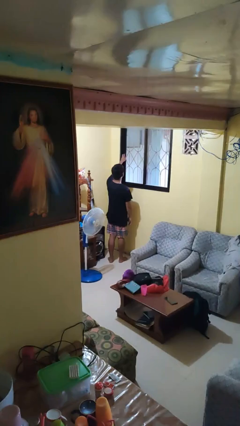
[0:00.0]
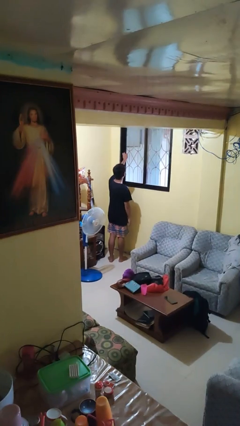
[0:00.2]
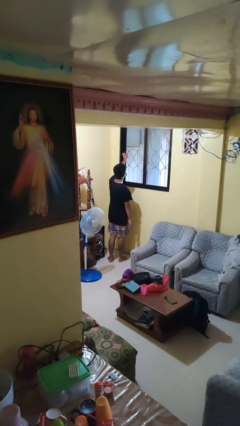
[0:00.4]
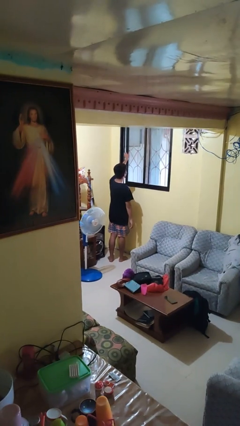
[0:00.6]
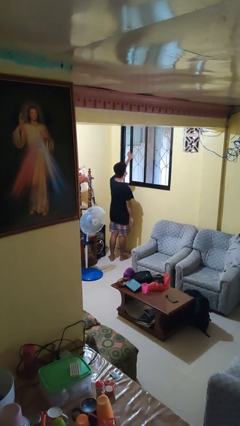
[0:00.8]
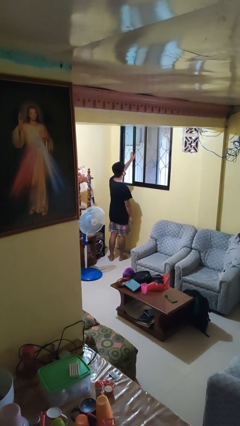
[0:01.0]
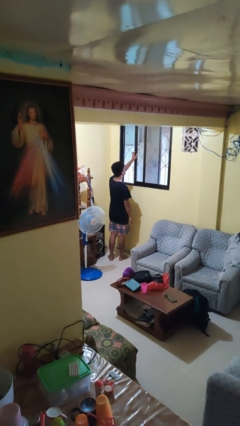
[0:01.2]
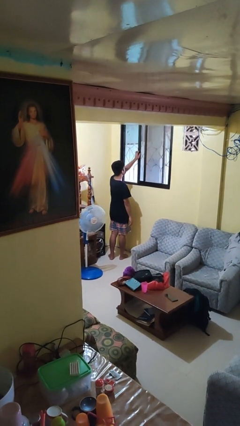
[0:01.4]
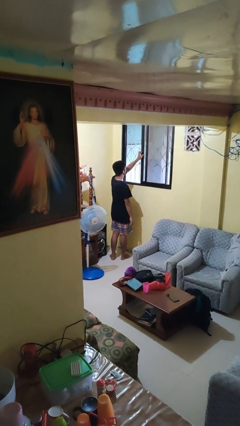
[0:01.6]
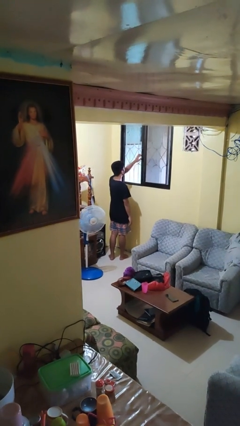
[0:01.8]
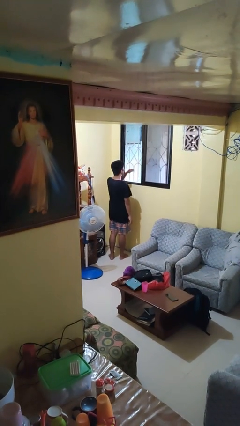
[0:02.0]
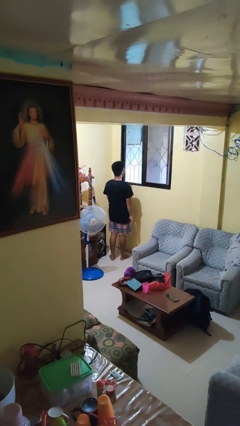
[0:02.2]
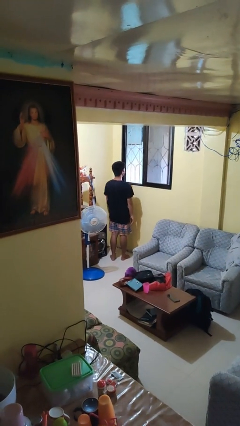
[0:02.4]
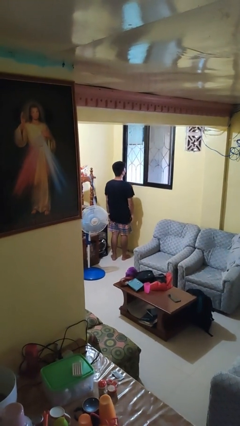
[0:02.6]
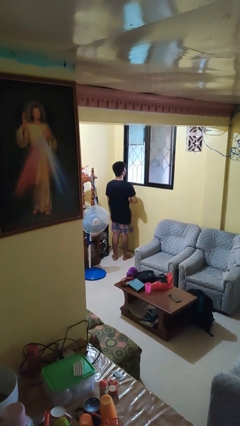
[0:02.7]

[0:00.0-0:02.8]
person opens home window

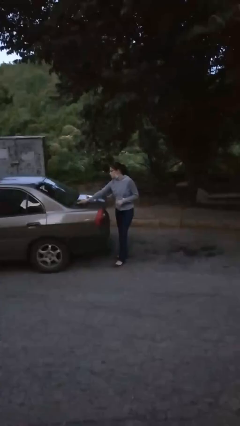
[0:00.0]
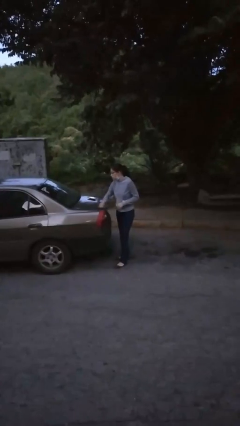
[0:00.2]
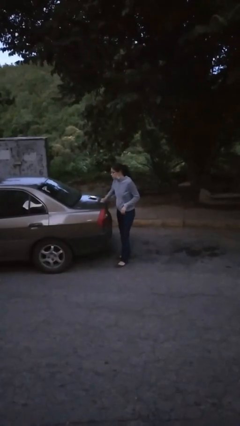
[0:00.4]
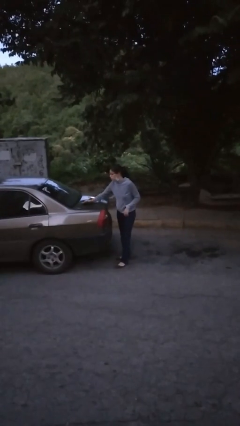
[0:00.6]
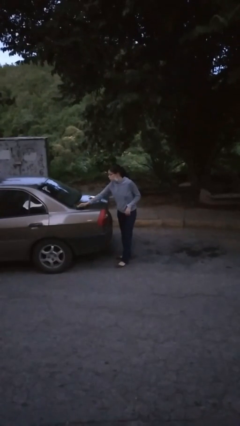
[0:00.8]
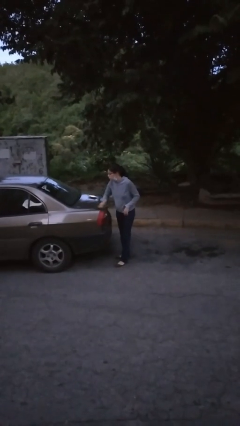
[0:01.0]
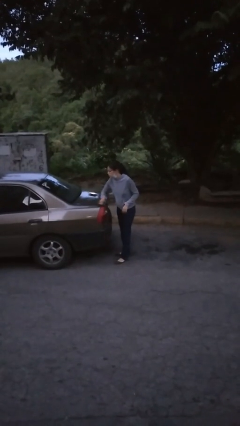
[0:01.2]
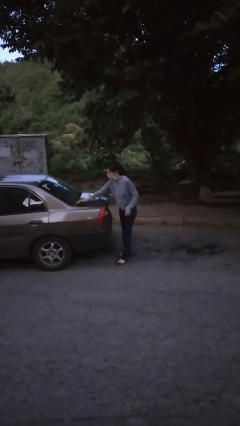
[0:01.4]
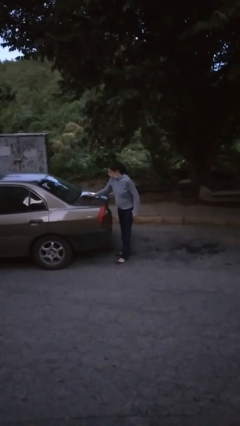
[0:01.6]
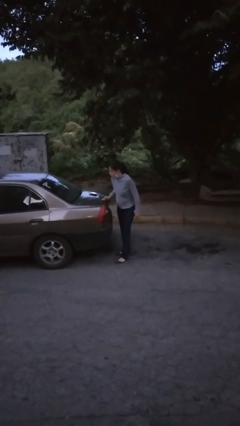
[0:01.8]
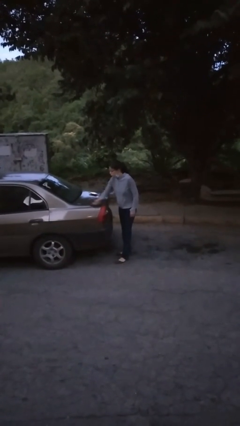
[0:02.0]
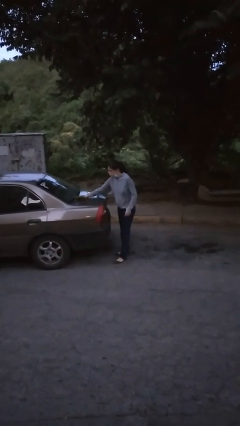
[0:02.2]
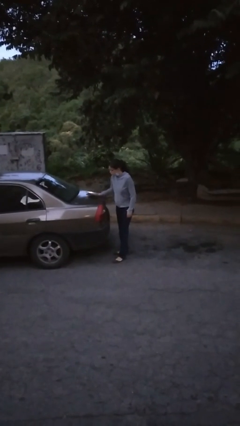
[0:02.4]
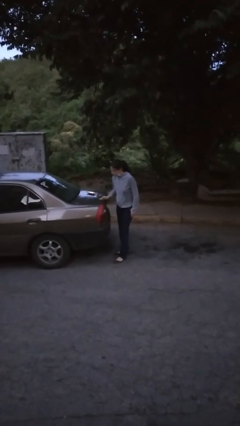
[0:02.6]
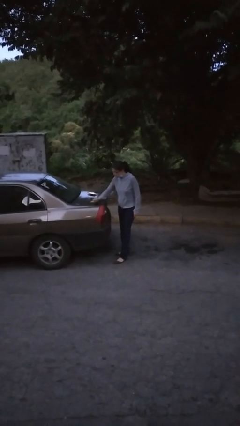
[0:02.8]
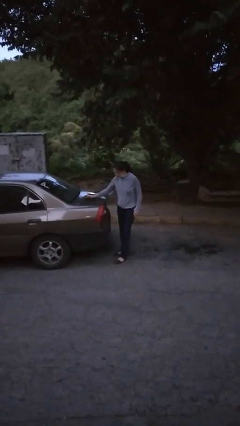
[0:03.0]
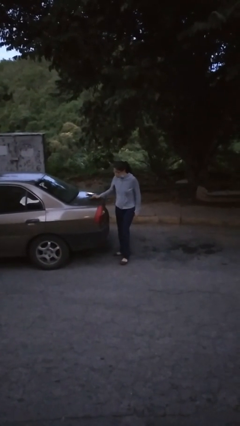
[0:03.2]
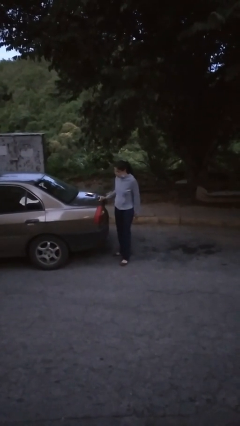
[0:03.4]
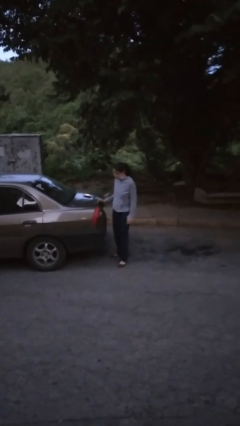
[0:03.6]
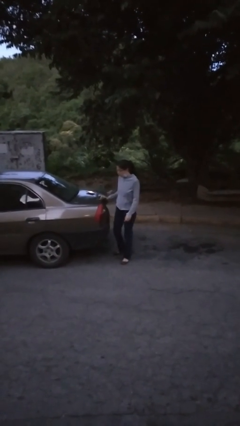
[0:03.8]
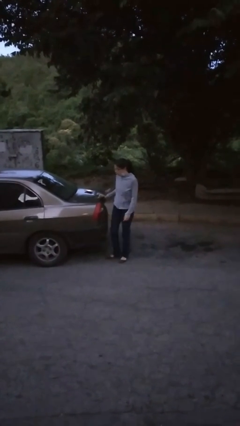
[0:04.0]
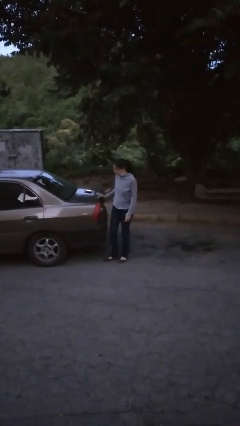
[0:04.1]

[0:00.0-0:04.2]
person polishes car with rag

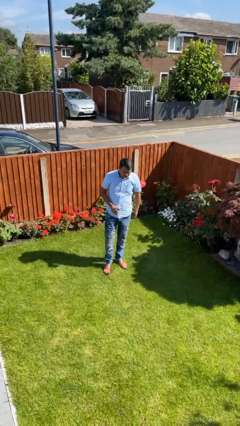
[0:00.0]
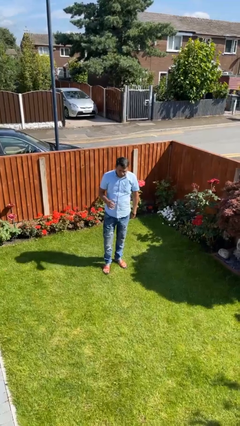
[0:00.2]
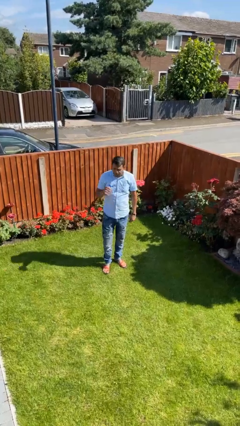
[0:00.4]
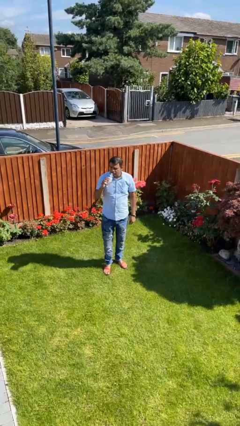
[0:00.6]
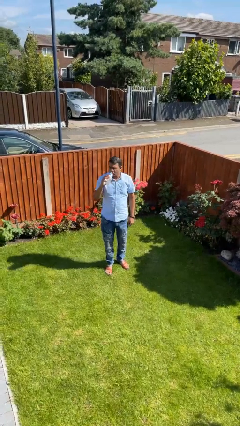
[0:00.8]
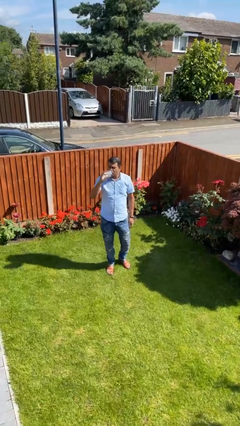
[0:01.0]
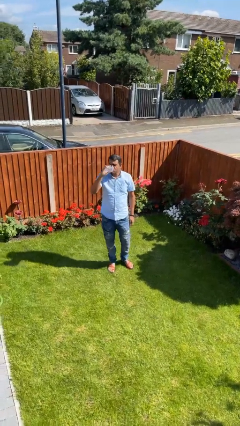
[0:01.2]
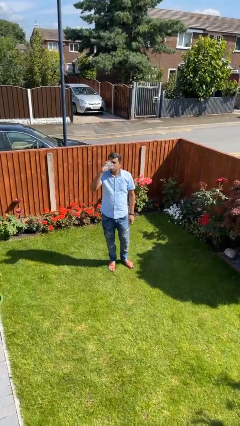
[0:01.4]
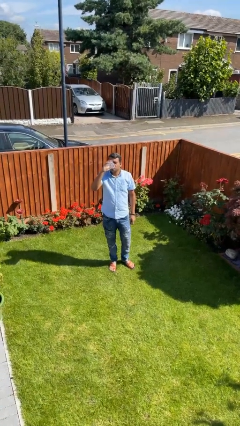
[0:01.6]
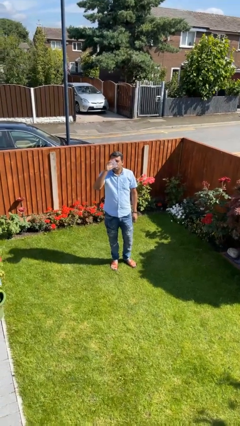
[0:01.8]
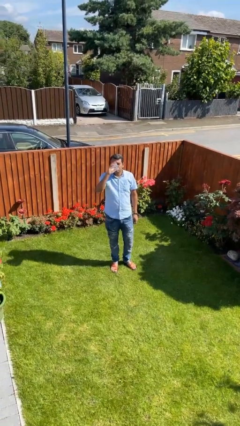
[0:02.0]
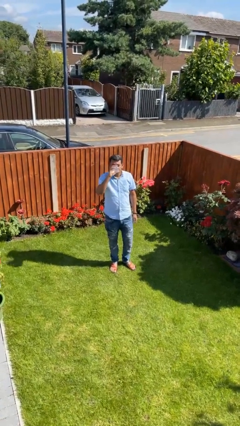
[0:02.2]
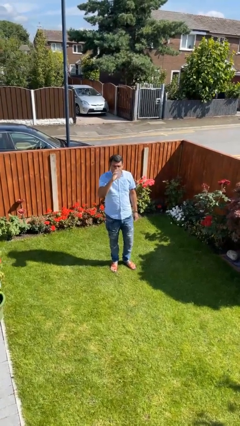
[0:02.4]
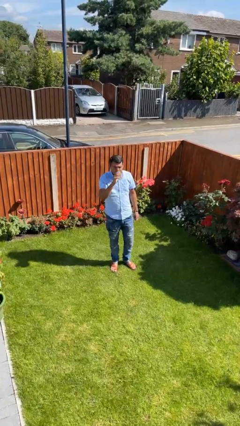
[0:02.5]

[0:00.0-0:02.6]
person drinks from bottle

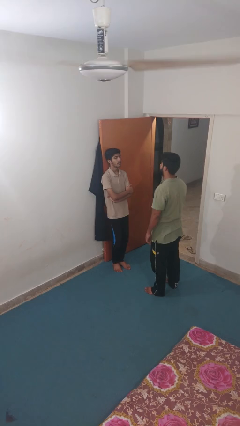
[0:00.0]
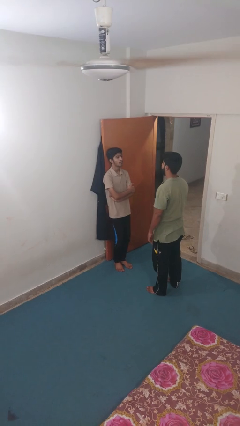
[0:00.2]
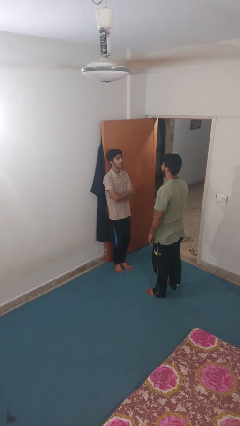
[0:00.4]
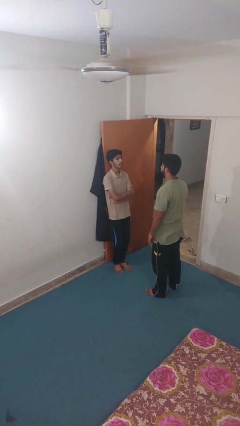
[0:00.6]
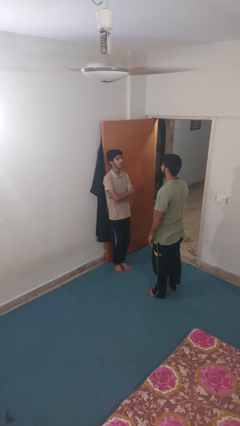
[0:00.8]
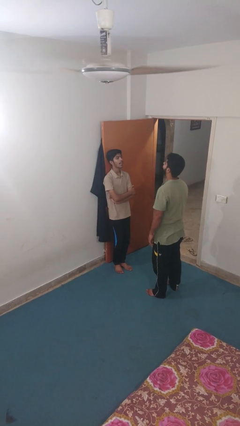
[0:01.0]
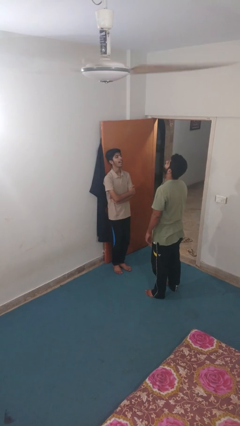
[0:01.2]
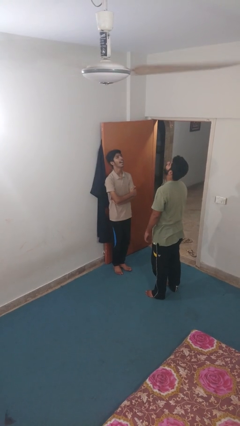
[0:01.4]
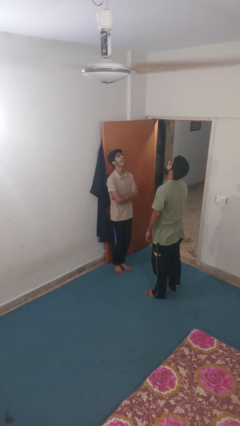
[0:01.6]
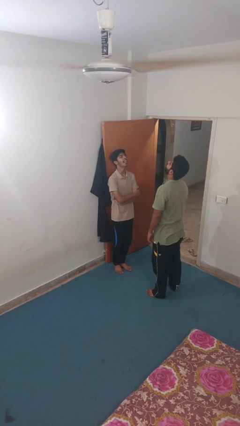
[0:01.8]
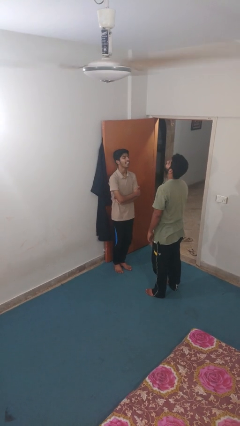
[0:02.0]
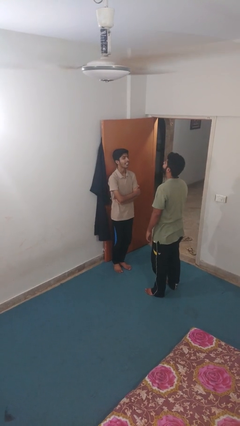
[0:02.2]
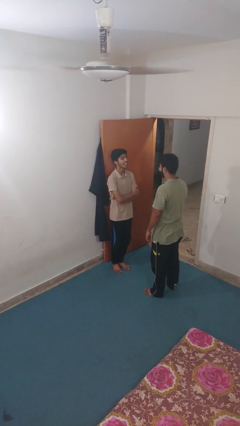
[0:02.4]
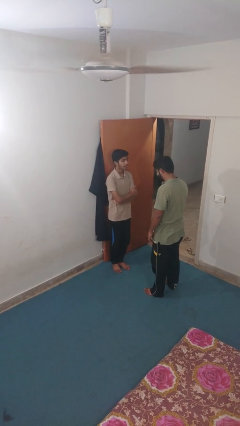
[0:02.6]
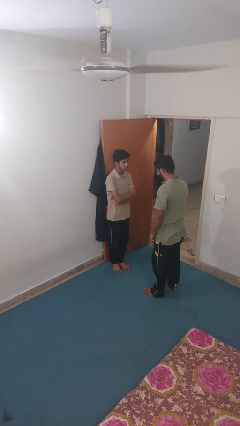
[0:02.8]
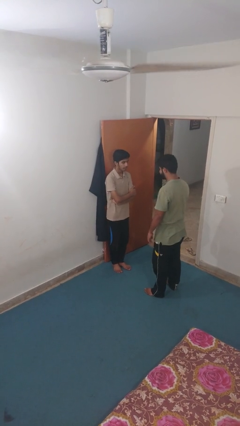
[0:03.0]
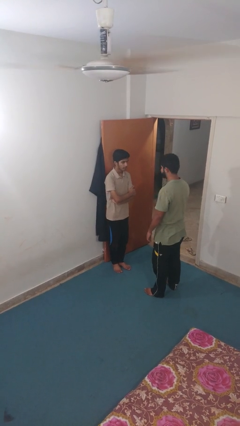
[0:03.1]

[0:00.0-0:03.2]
person laughs with person

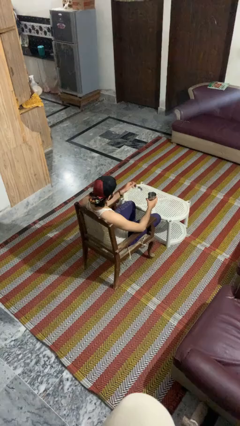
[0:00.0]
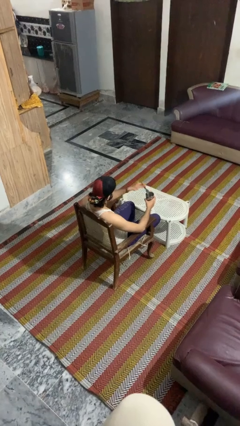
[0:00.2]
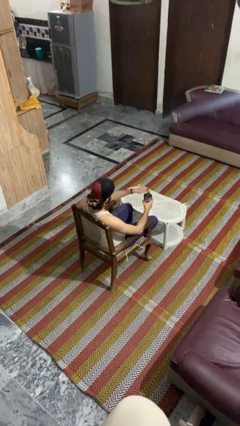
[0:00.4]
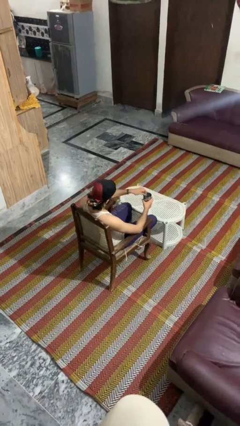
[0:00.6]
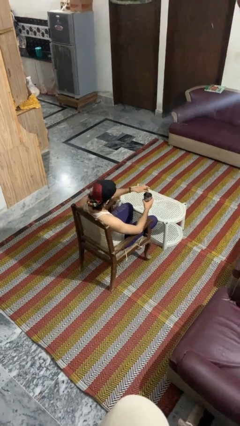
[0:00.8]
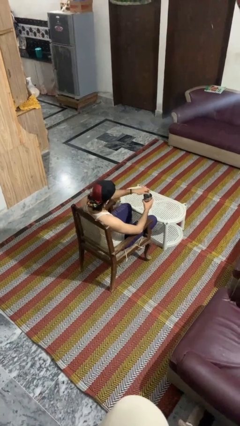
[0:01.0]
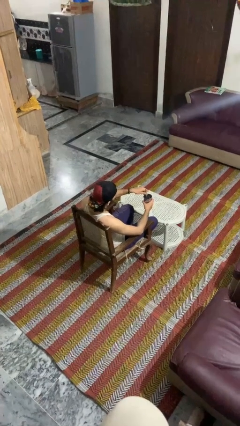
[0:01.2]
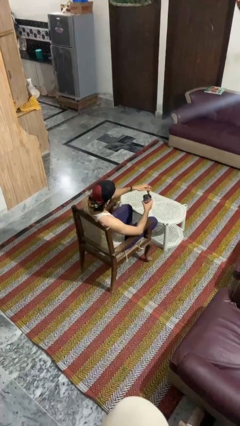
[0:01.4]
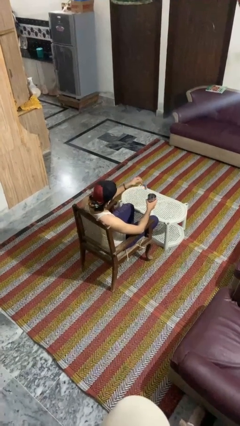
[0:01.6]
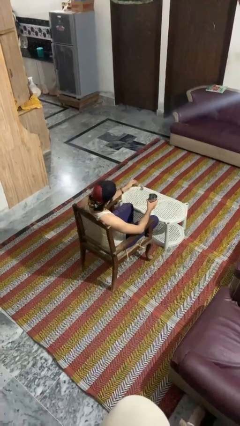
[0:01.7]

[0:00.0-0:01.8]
person stirs mug

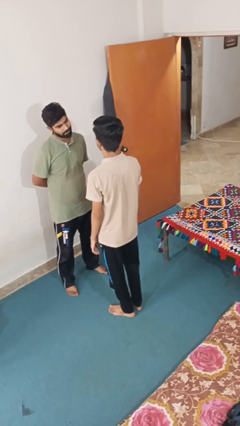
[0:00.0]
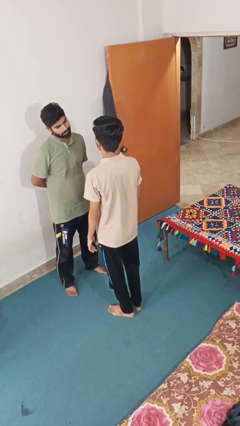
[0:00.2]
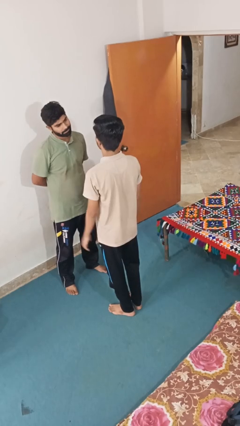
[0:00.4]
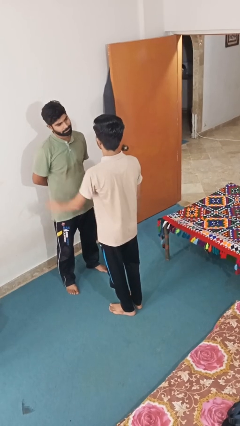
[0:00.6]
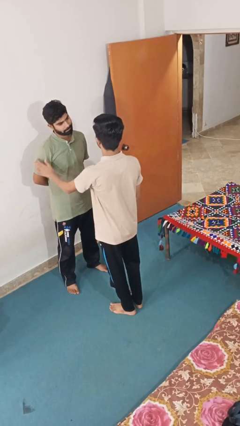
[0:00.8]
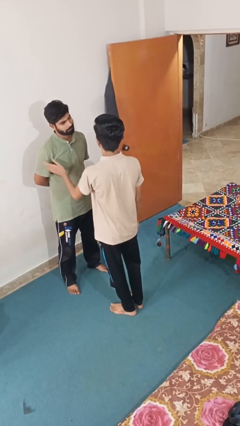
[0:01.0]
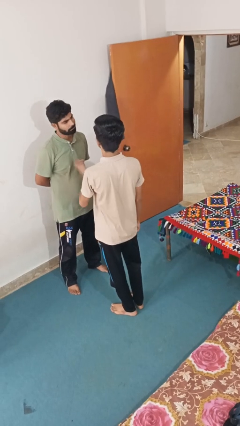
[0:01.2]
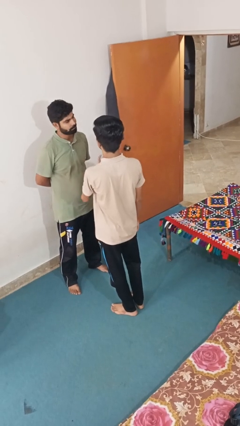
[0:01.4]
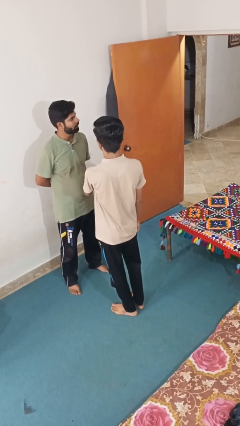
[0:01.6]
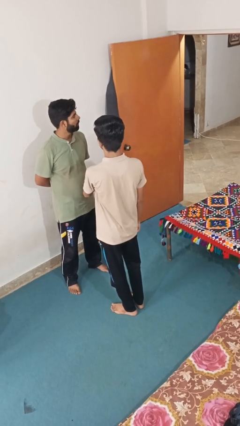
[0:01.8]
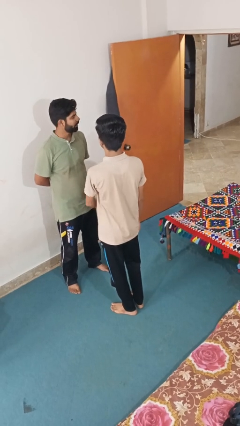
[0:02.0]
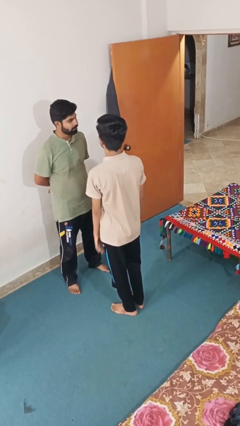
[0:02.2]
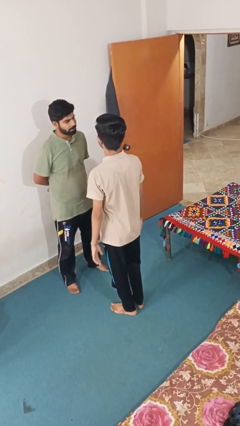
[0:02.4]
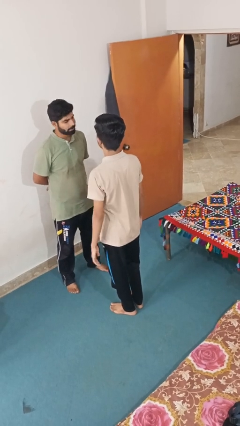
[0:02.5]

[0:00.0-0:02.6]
person shoves person

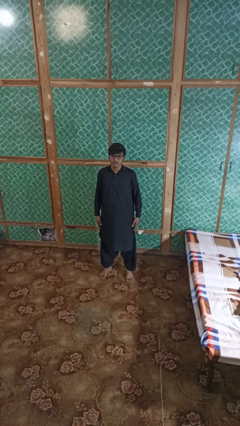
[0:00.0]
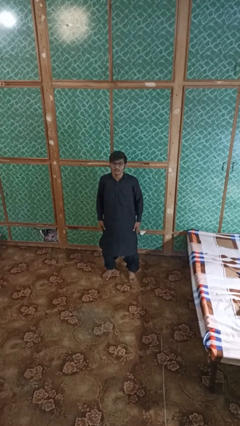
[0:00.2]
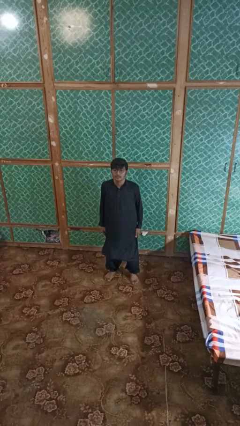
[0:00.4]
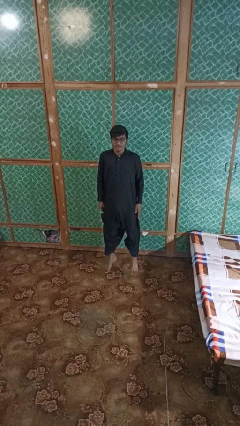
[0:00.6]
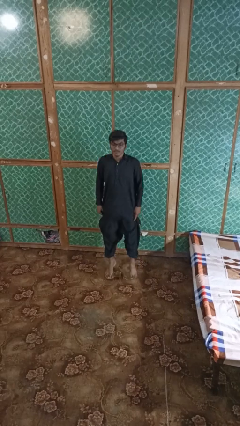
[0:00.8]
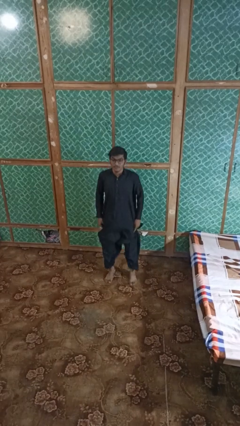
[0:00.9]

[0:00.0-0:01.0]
person jumps
